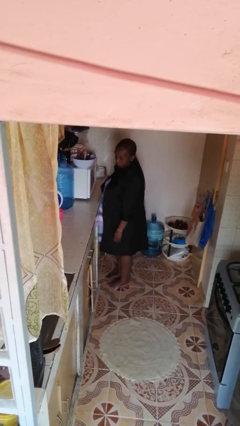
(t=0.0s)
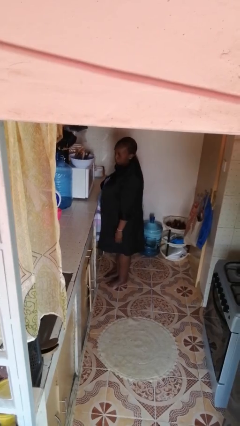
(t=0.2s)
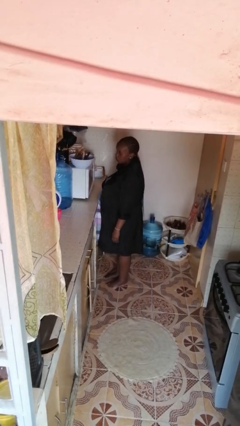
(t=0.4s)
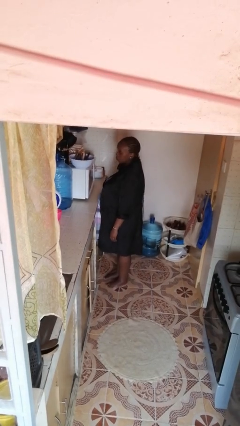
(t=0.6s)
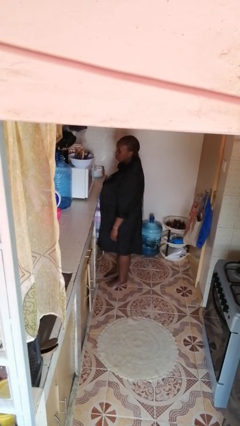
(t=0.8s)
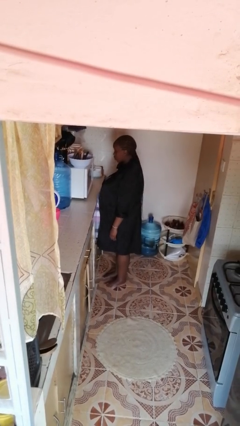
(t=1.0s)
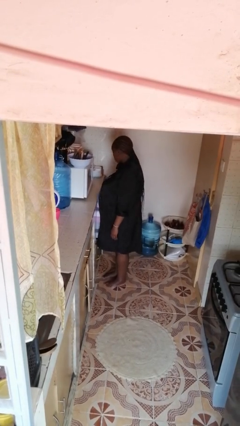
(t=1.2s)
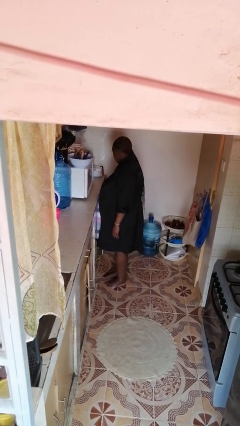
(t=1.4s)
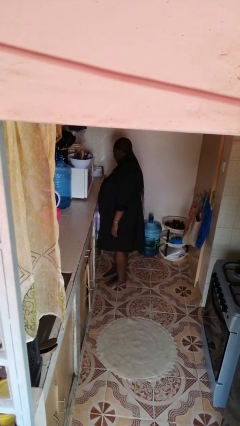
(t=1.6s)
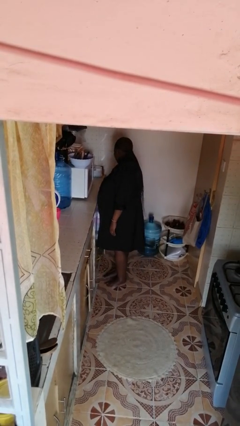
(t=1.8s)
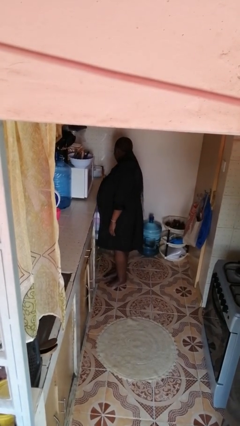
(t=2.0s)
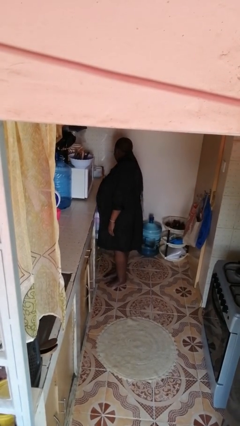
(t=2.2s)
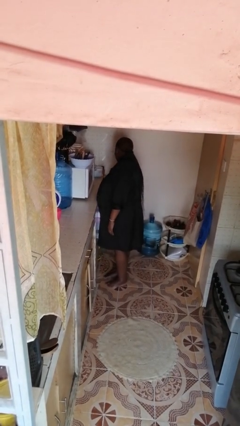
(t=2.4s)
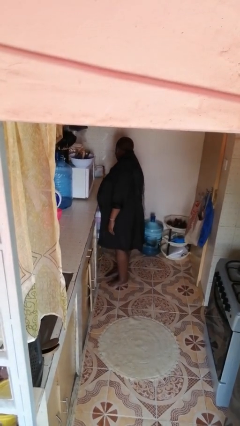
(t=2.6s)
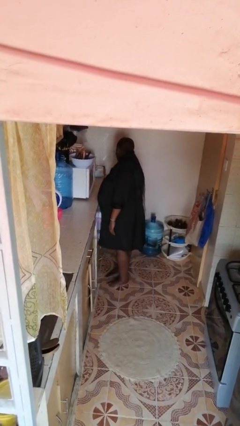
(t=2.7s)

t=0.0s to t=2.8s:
person opens cabinet

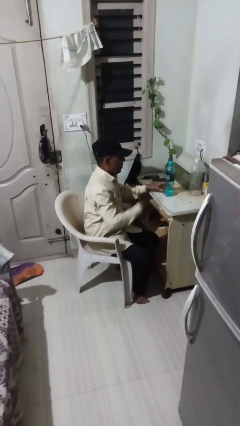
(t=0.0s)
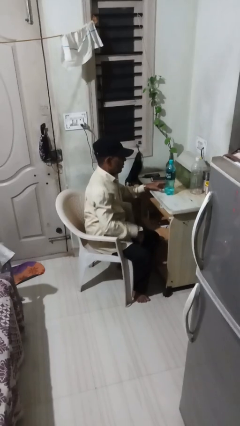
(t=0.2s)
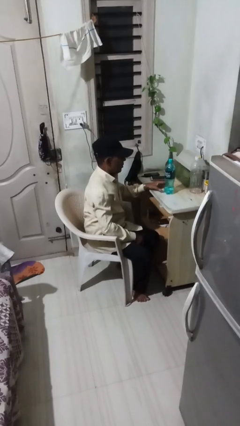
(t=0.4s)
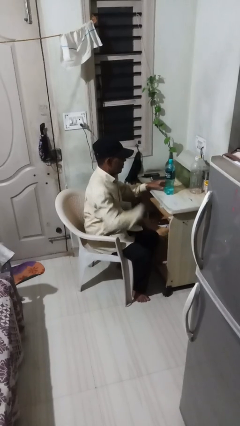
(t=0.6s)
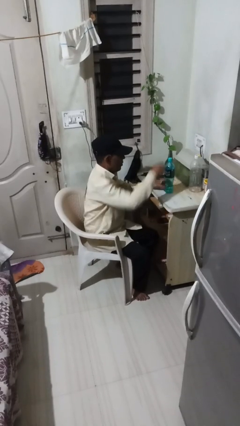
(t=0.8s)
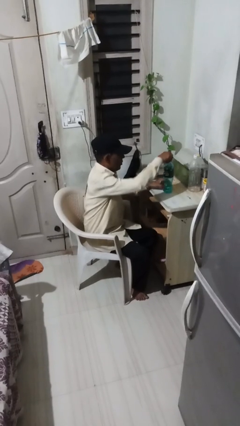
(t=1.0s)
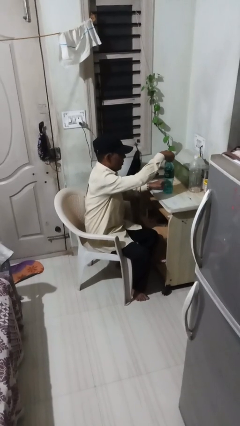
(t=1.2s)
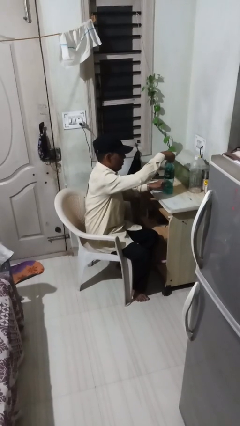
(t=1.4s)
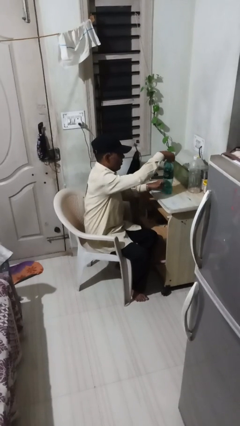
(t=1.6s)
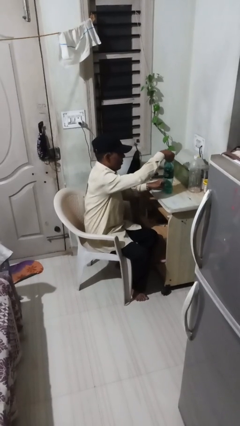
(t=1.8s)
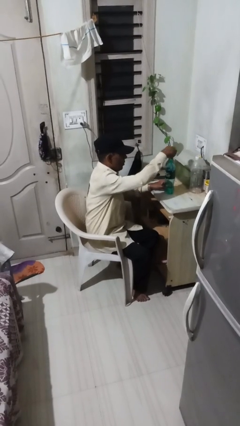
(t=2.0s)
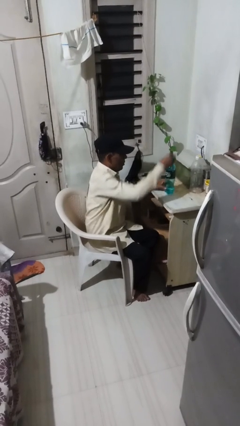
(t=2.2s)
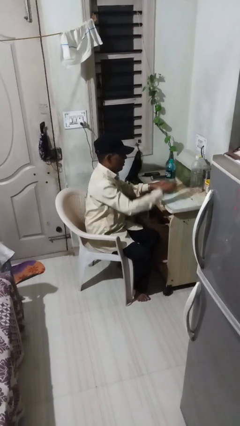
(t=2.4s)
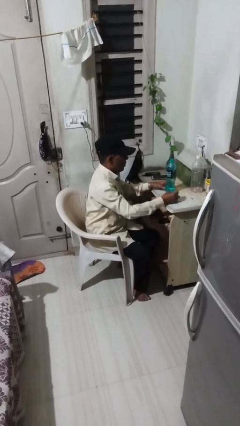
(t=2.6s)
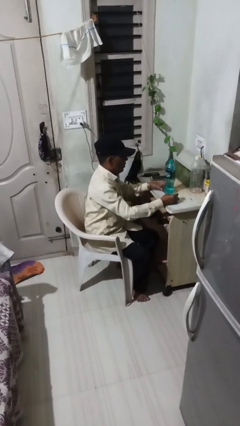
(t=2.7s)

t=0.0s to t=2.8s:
person unscrews lid from bottle

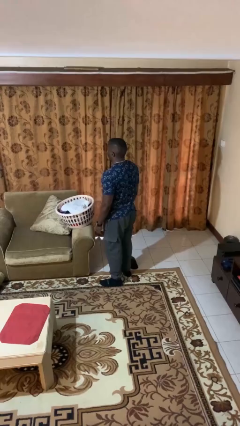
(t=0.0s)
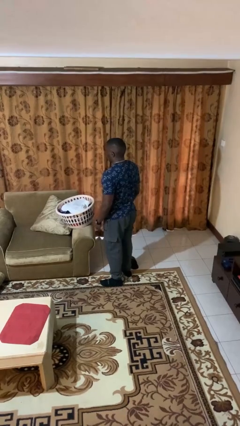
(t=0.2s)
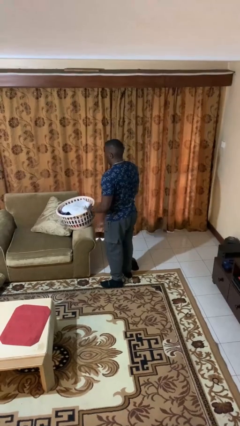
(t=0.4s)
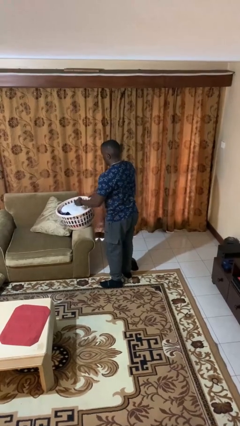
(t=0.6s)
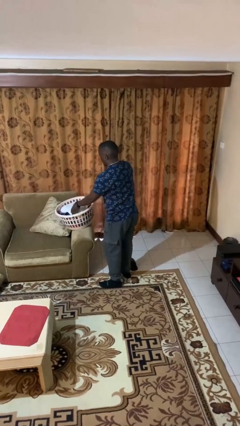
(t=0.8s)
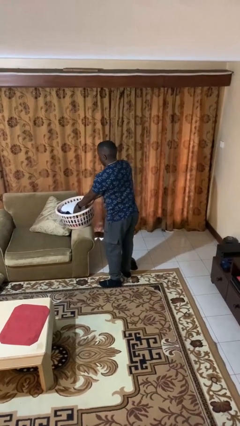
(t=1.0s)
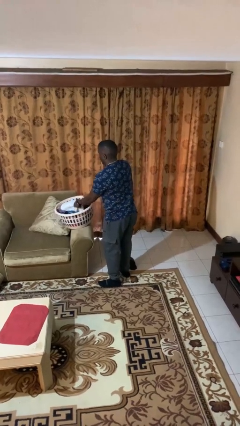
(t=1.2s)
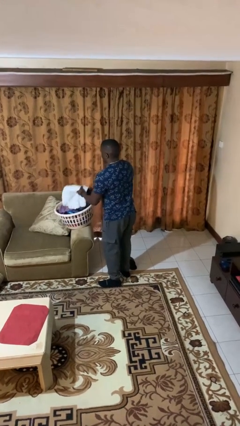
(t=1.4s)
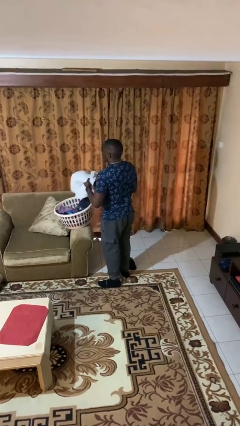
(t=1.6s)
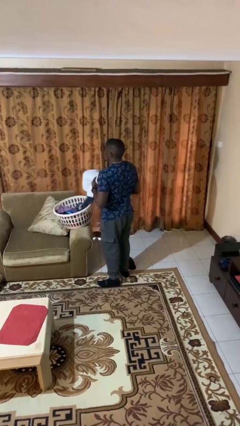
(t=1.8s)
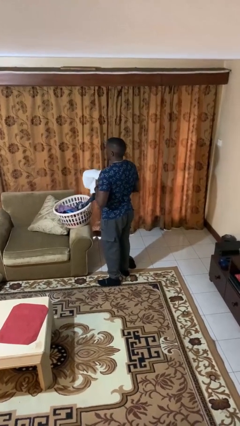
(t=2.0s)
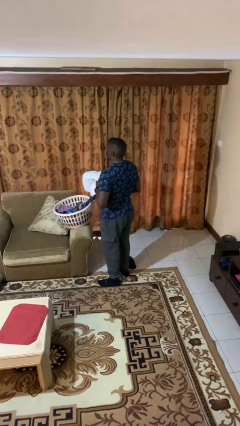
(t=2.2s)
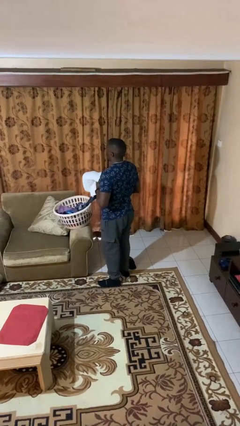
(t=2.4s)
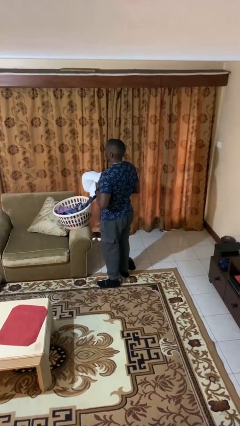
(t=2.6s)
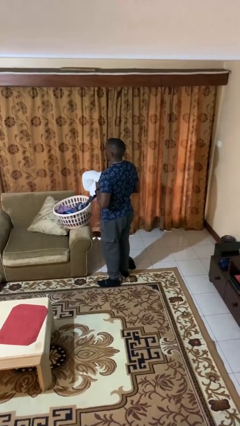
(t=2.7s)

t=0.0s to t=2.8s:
person takes object from basket

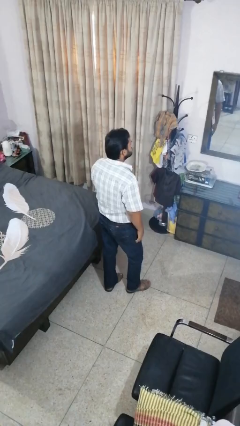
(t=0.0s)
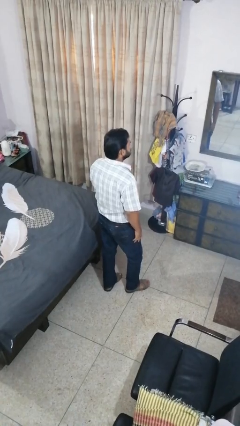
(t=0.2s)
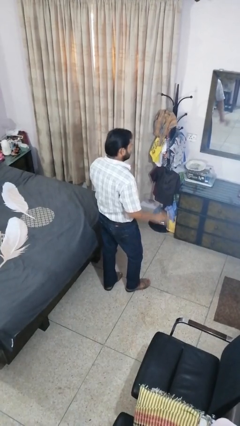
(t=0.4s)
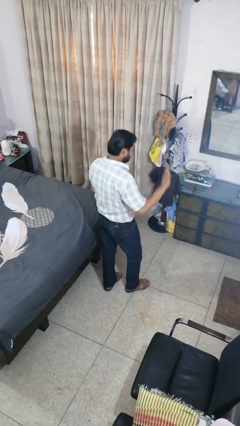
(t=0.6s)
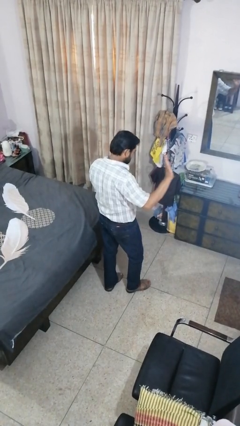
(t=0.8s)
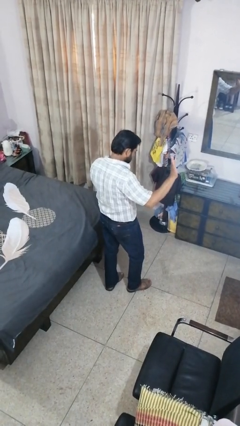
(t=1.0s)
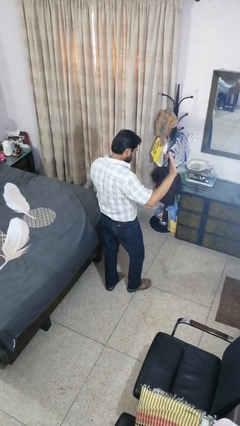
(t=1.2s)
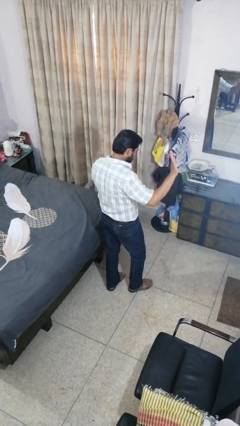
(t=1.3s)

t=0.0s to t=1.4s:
person gestures stop

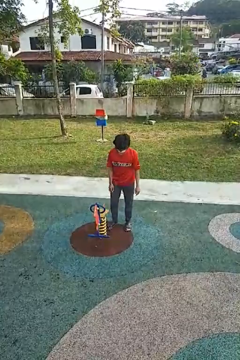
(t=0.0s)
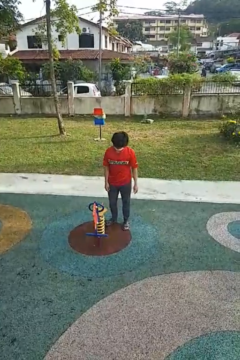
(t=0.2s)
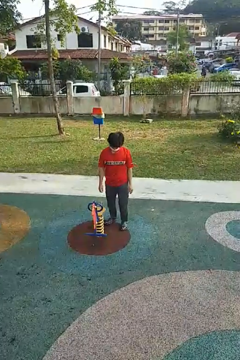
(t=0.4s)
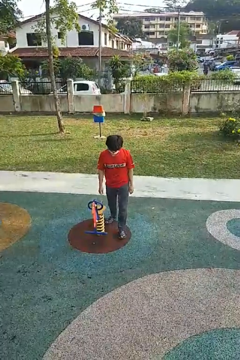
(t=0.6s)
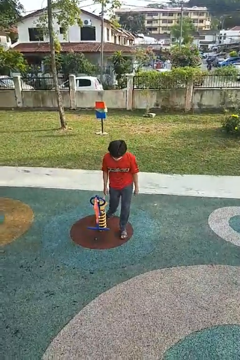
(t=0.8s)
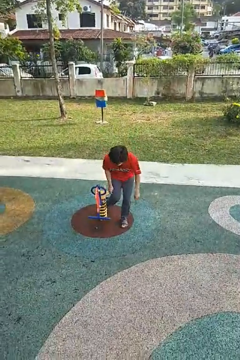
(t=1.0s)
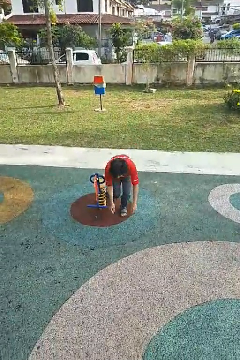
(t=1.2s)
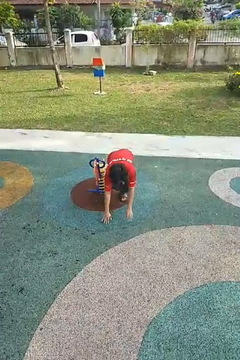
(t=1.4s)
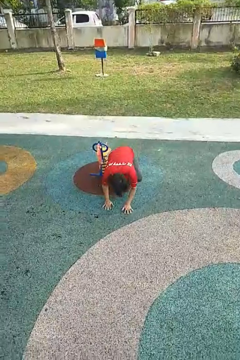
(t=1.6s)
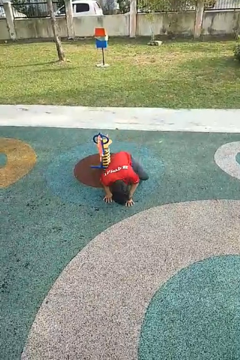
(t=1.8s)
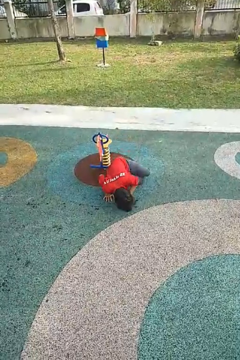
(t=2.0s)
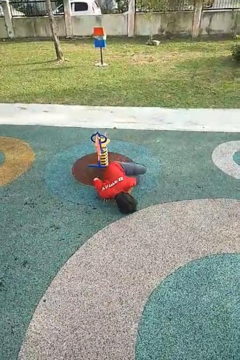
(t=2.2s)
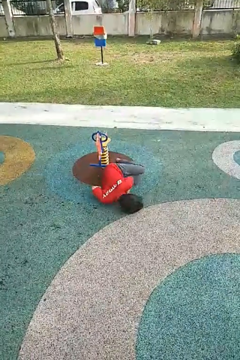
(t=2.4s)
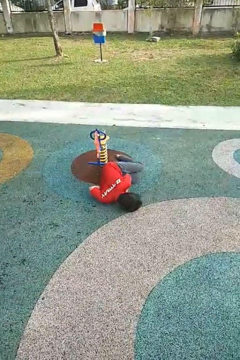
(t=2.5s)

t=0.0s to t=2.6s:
person trips on object on floor

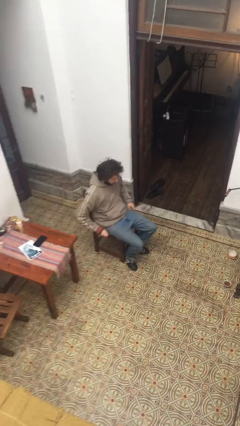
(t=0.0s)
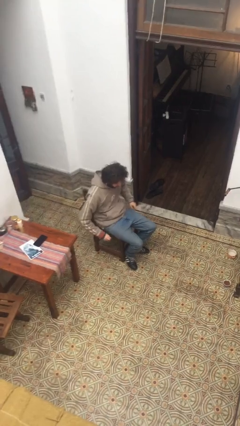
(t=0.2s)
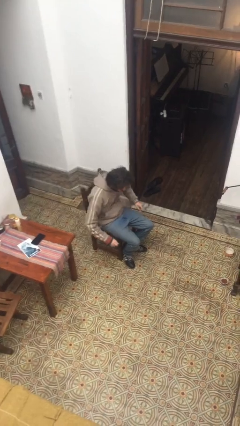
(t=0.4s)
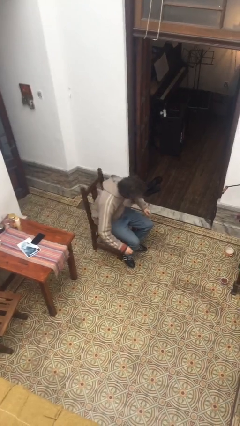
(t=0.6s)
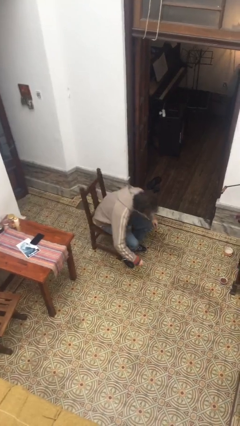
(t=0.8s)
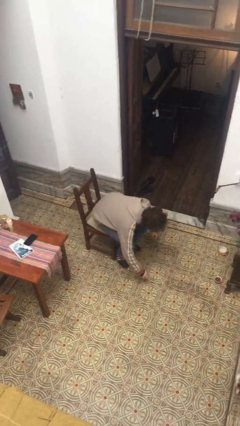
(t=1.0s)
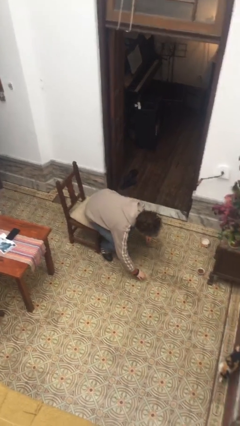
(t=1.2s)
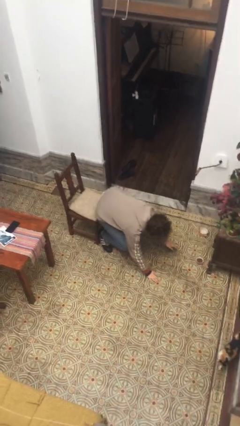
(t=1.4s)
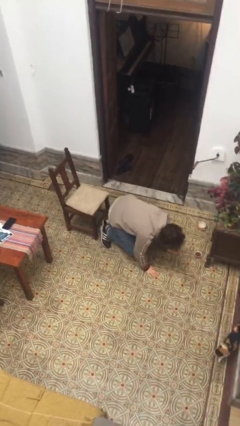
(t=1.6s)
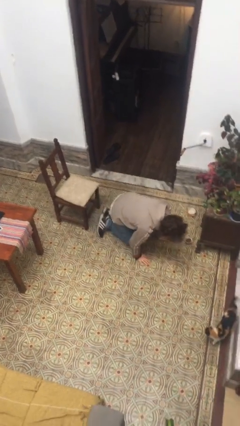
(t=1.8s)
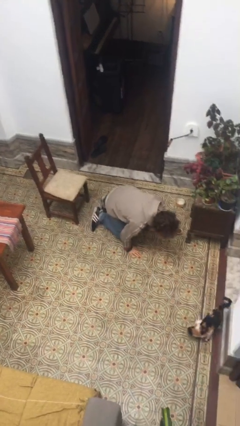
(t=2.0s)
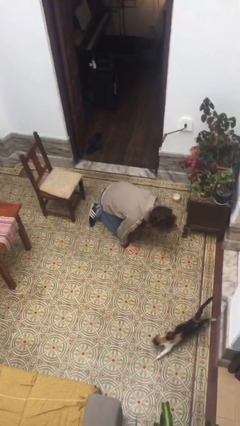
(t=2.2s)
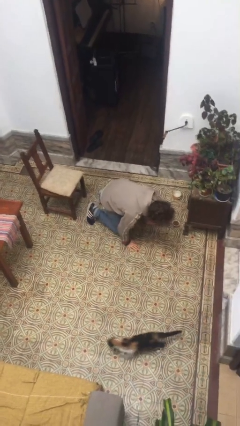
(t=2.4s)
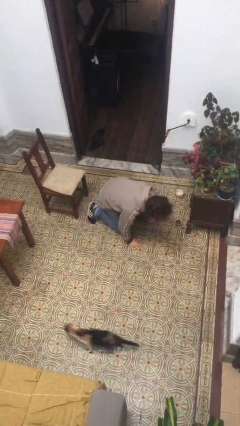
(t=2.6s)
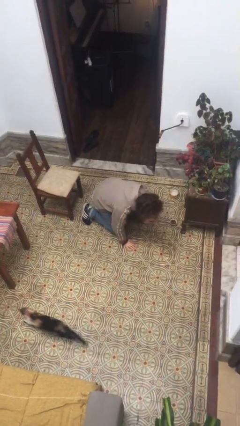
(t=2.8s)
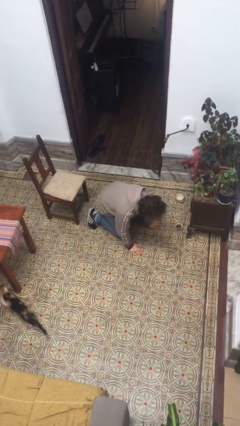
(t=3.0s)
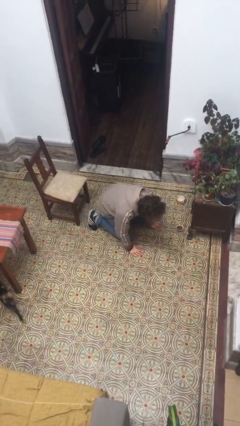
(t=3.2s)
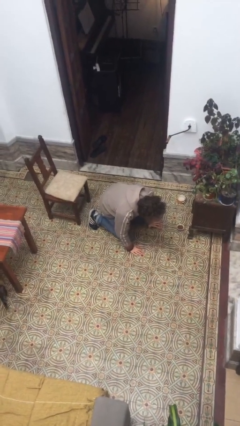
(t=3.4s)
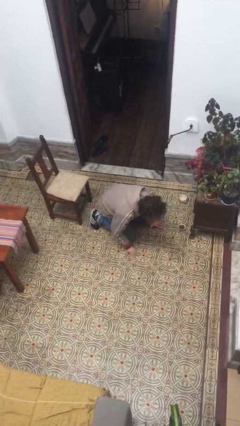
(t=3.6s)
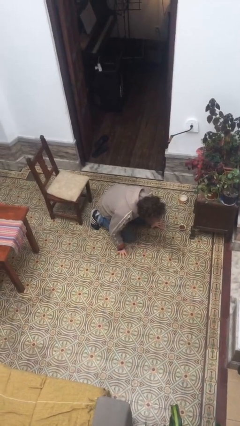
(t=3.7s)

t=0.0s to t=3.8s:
person falls from chair

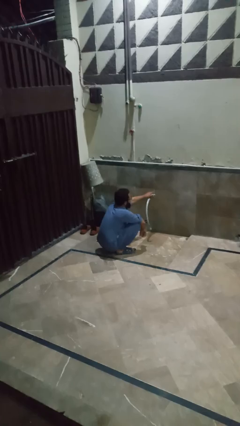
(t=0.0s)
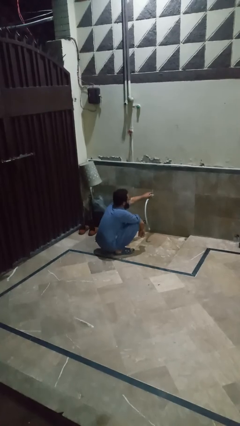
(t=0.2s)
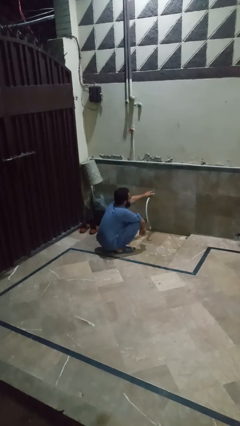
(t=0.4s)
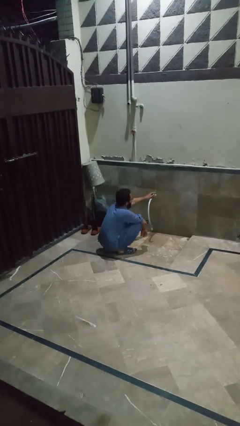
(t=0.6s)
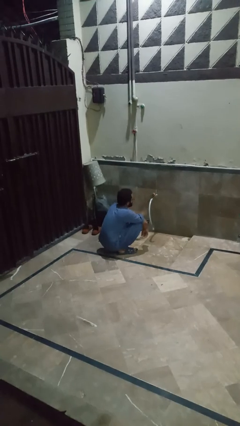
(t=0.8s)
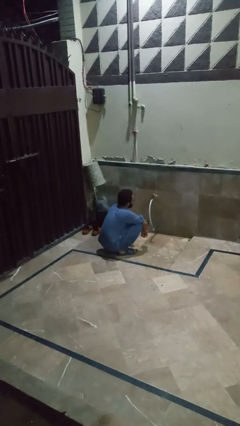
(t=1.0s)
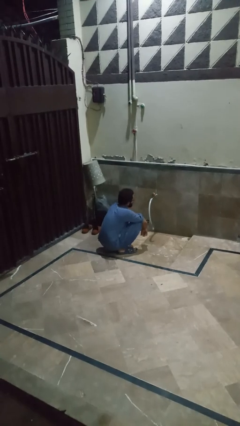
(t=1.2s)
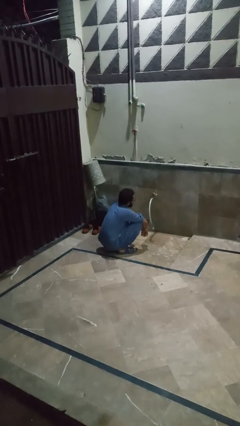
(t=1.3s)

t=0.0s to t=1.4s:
person turns off faucet
